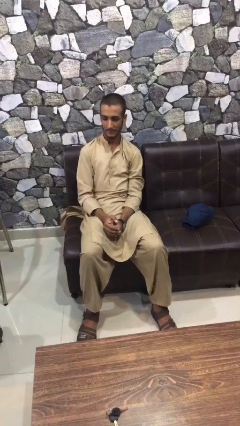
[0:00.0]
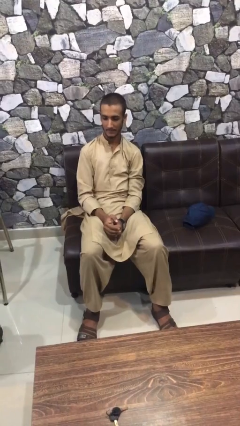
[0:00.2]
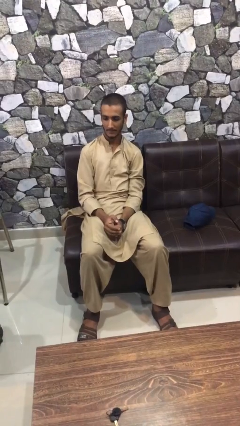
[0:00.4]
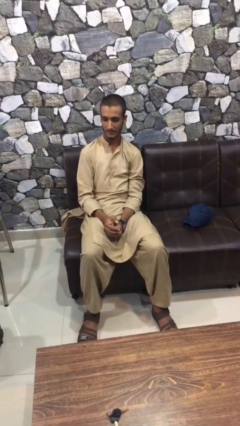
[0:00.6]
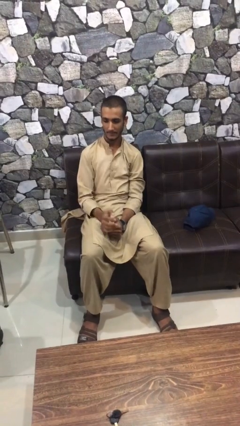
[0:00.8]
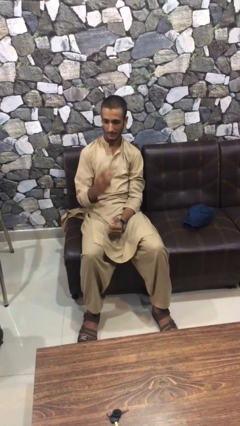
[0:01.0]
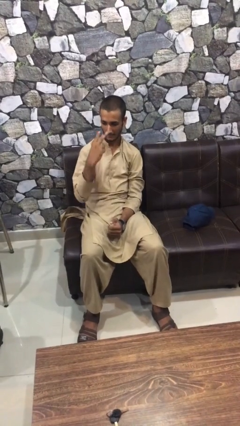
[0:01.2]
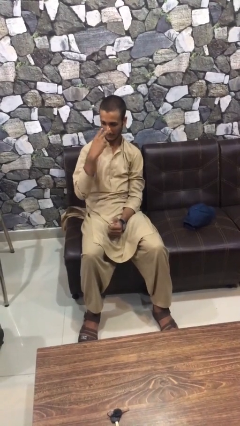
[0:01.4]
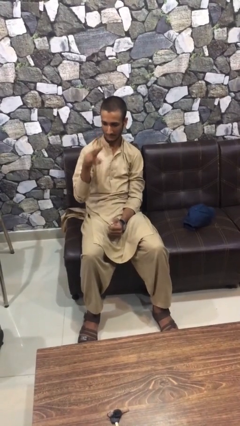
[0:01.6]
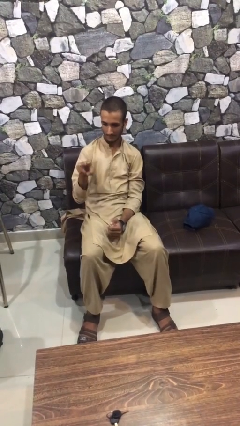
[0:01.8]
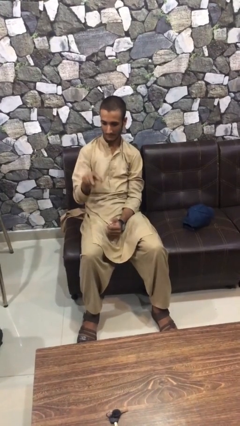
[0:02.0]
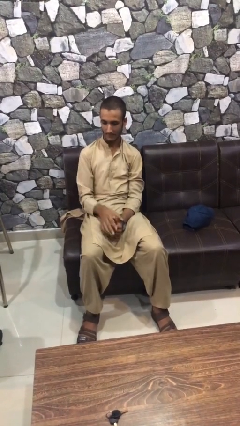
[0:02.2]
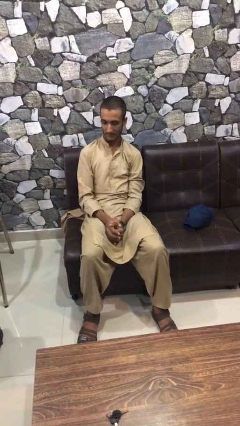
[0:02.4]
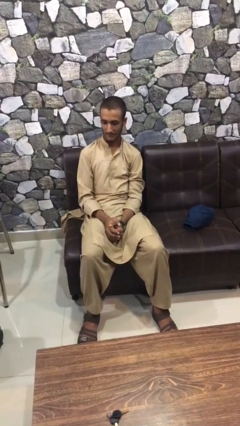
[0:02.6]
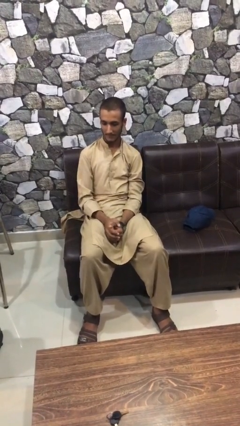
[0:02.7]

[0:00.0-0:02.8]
person gestures watch closely

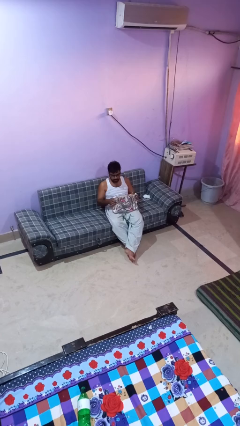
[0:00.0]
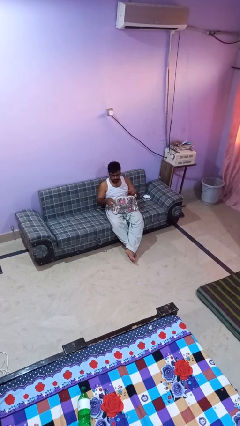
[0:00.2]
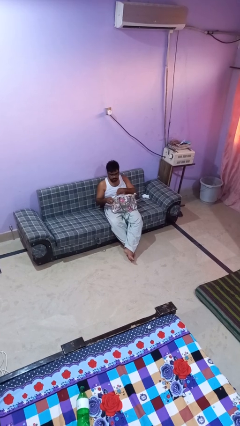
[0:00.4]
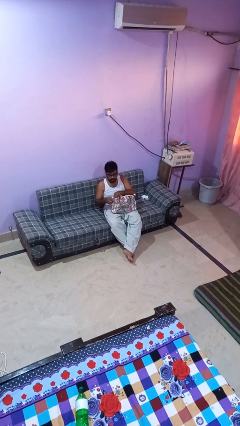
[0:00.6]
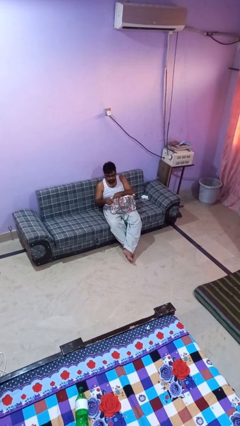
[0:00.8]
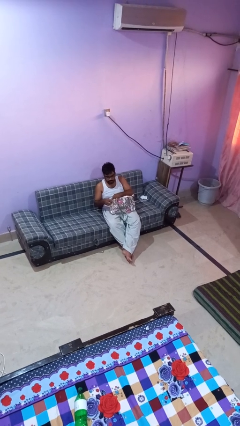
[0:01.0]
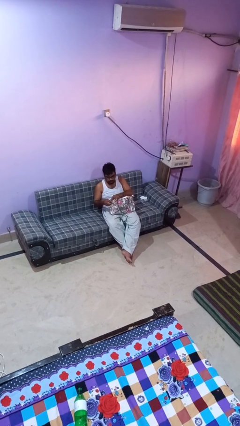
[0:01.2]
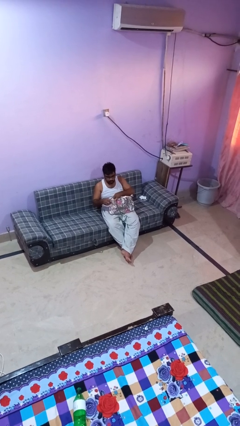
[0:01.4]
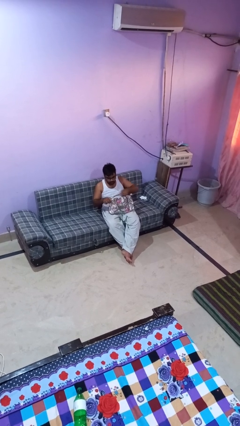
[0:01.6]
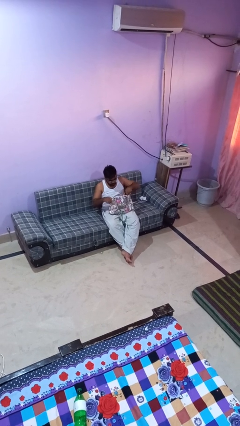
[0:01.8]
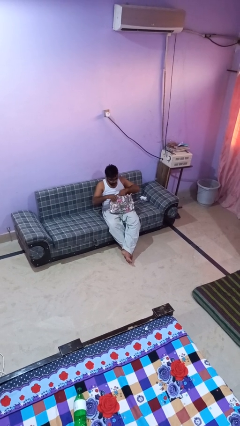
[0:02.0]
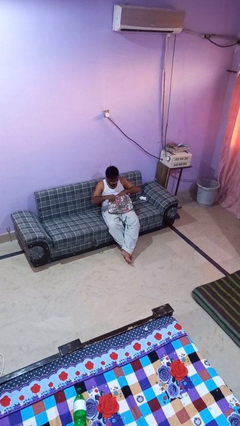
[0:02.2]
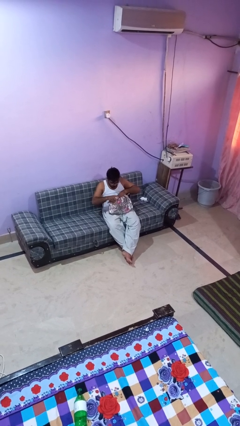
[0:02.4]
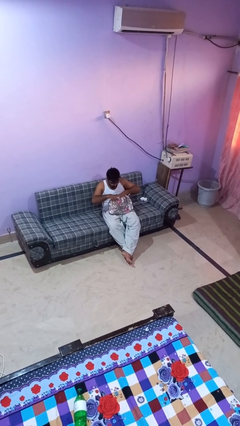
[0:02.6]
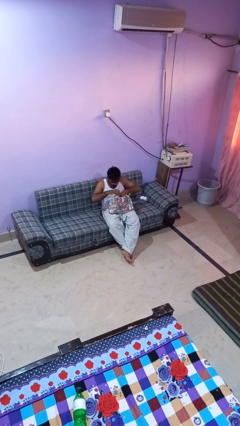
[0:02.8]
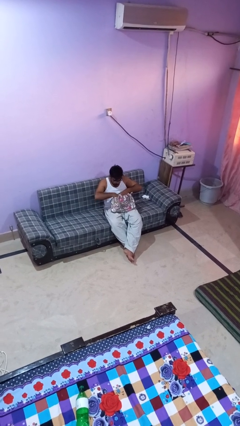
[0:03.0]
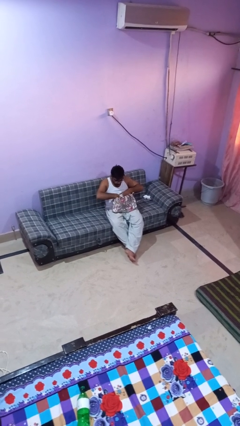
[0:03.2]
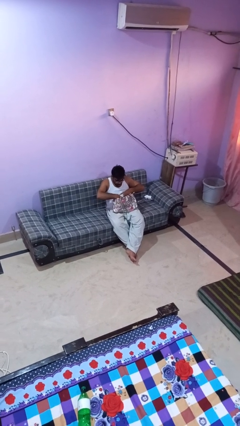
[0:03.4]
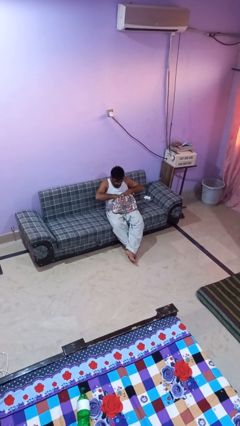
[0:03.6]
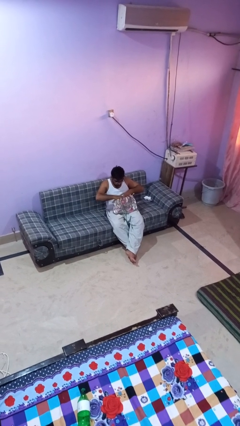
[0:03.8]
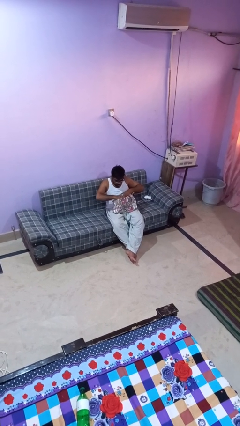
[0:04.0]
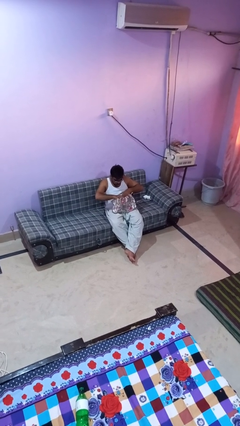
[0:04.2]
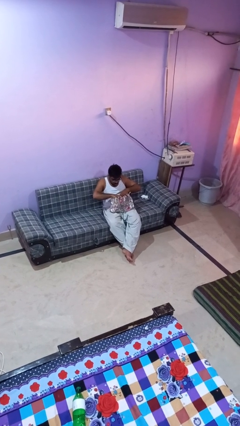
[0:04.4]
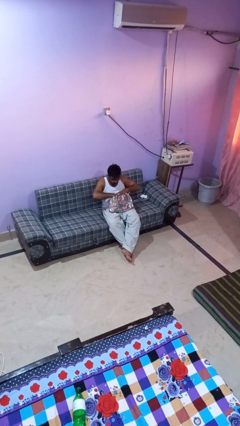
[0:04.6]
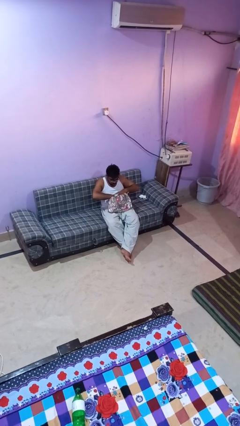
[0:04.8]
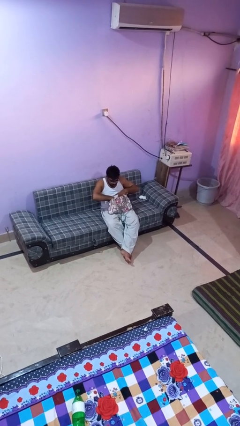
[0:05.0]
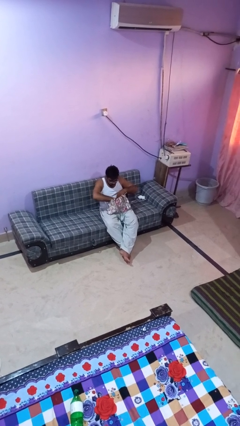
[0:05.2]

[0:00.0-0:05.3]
person searches in purse

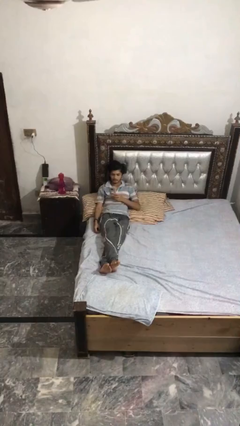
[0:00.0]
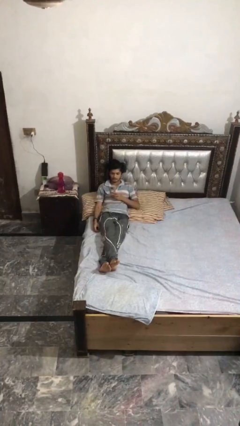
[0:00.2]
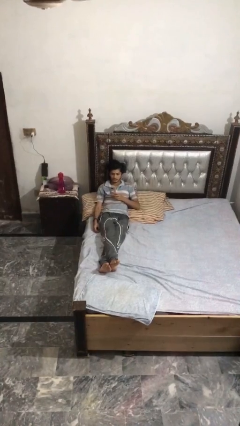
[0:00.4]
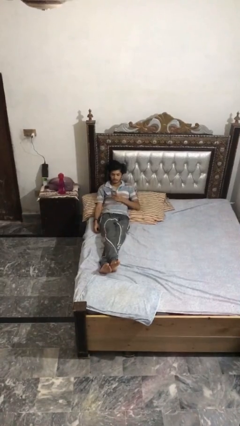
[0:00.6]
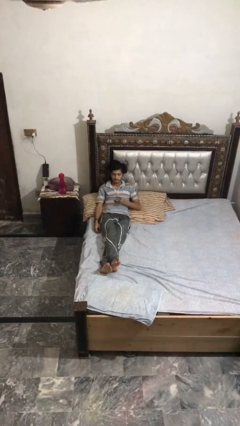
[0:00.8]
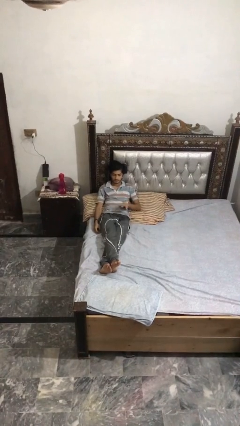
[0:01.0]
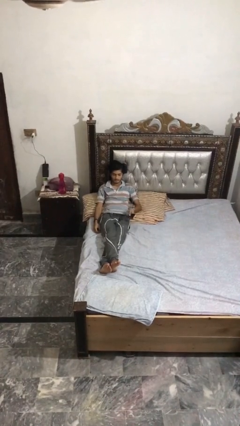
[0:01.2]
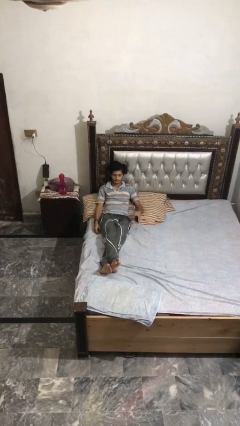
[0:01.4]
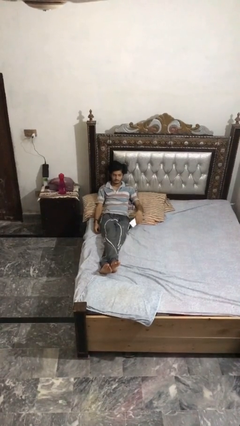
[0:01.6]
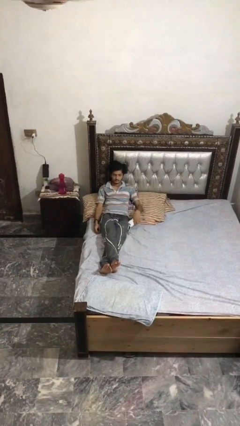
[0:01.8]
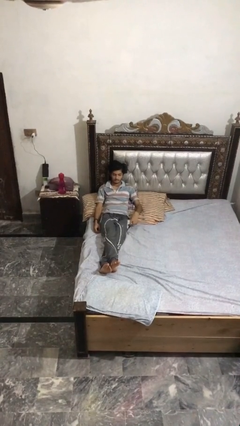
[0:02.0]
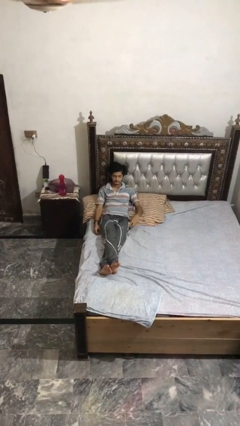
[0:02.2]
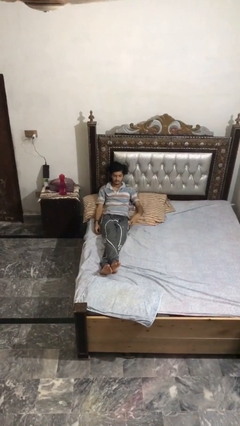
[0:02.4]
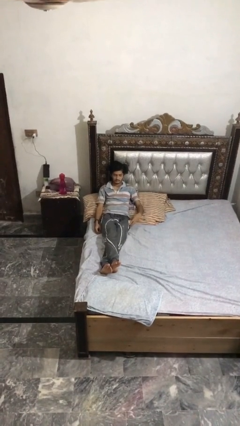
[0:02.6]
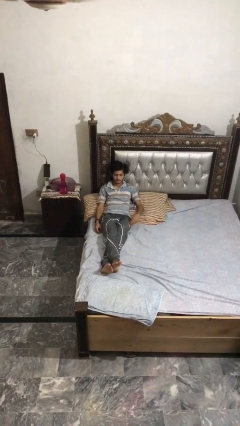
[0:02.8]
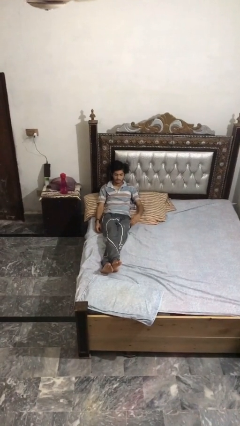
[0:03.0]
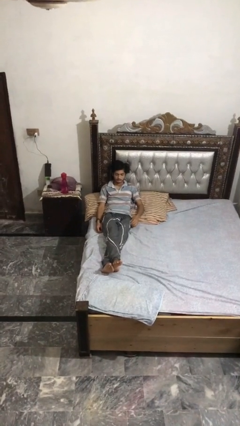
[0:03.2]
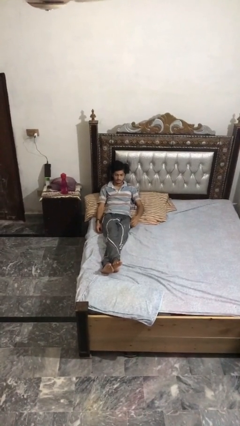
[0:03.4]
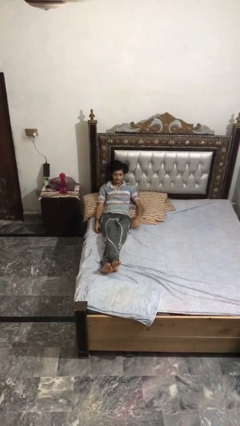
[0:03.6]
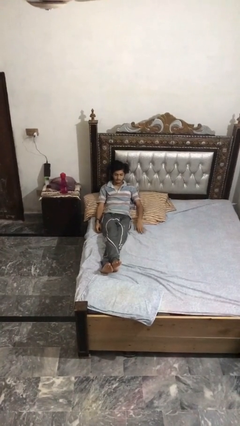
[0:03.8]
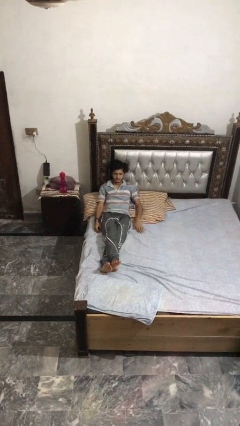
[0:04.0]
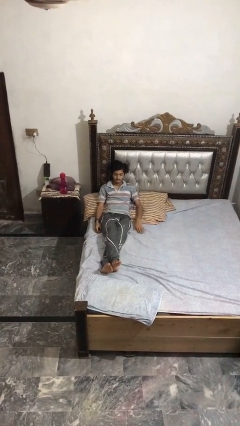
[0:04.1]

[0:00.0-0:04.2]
person puts phone into pocket

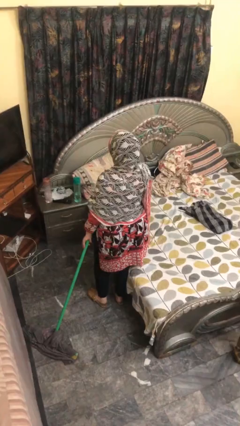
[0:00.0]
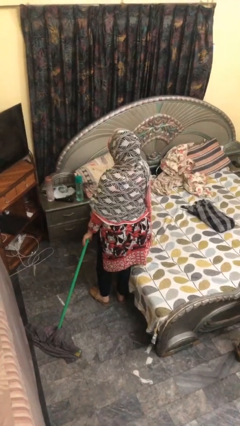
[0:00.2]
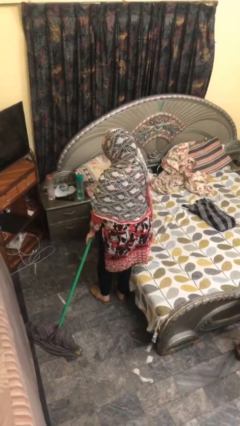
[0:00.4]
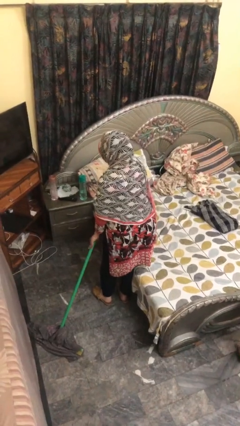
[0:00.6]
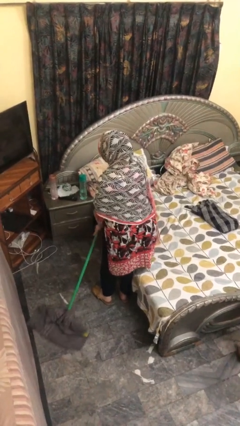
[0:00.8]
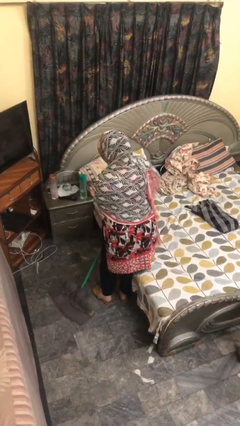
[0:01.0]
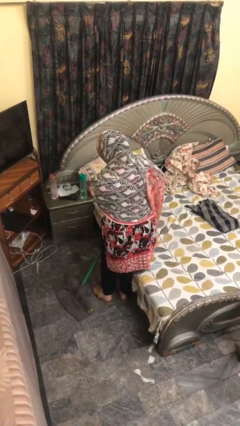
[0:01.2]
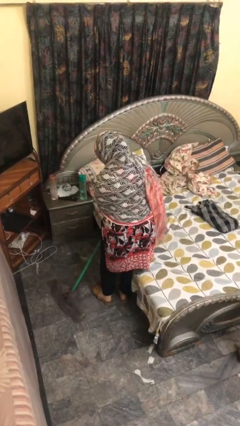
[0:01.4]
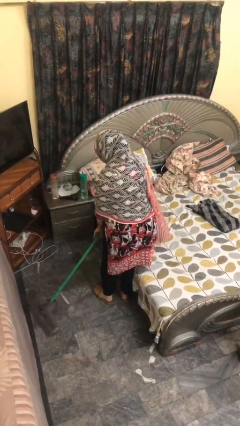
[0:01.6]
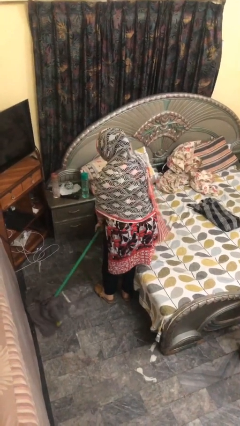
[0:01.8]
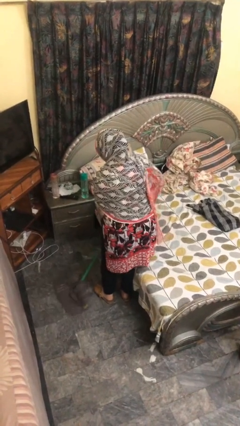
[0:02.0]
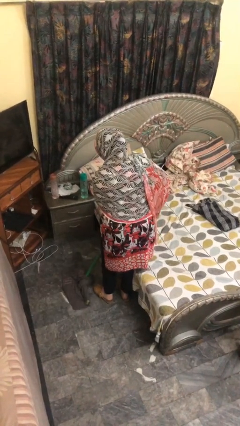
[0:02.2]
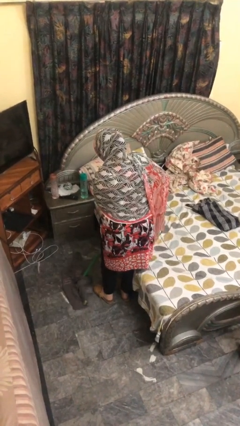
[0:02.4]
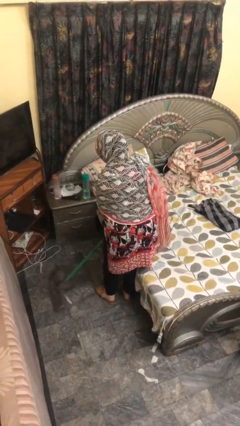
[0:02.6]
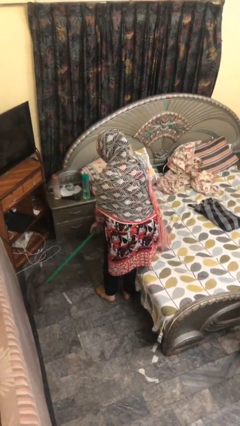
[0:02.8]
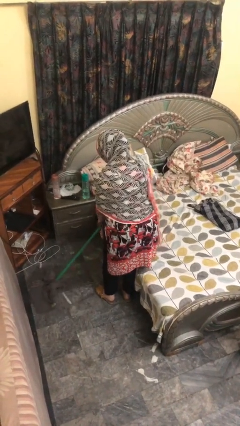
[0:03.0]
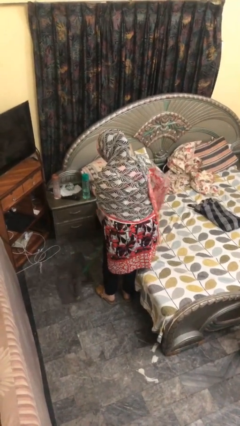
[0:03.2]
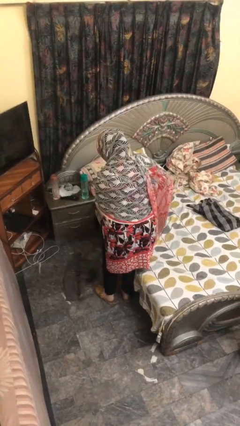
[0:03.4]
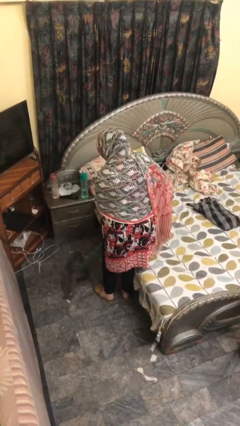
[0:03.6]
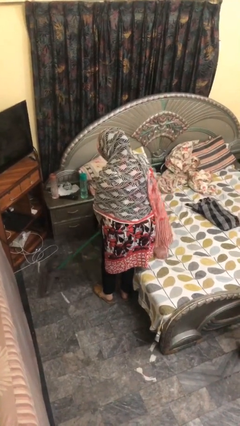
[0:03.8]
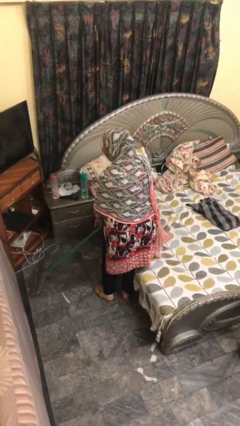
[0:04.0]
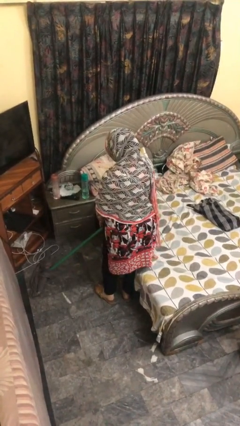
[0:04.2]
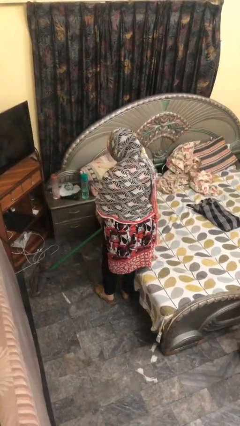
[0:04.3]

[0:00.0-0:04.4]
person mops

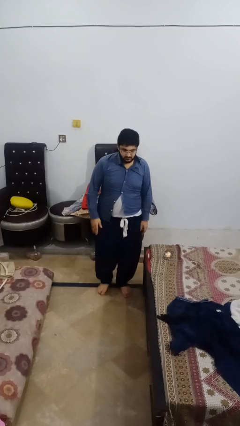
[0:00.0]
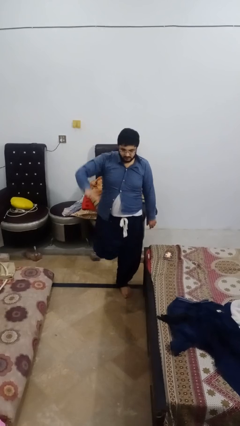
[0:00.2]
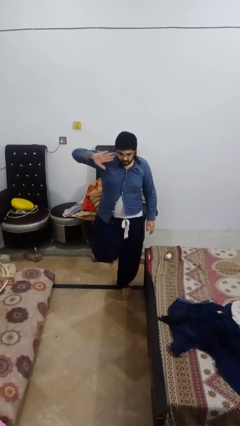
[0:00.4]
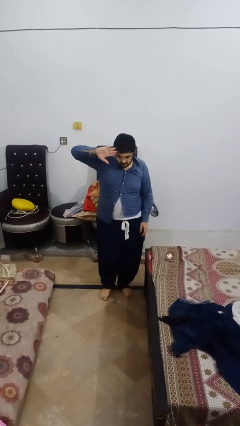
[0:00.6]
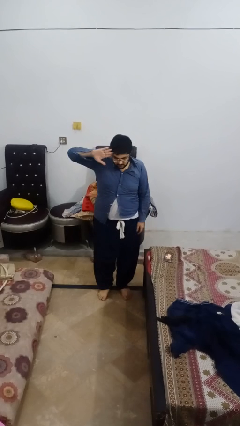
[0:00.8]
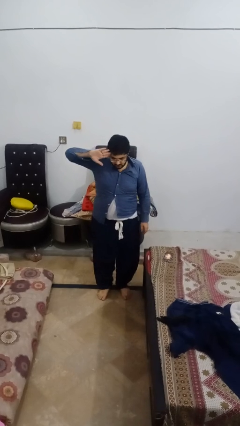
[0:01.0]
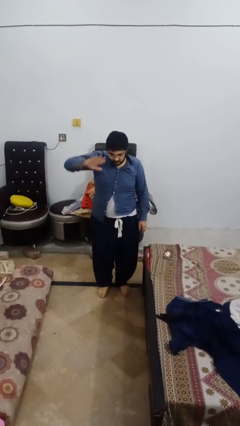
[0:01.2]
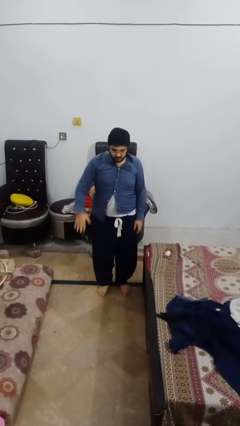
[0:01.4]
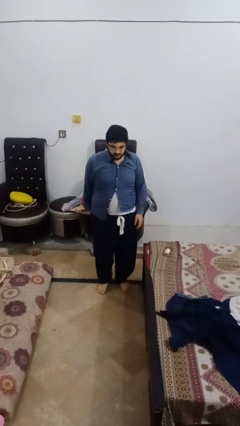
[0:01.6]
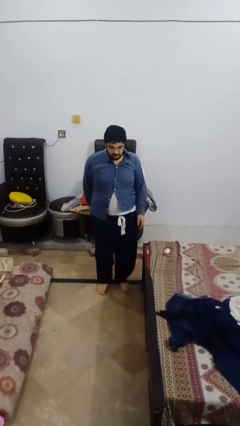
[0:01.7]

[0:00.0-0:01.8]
person salutes
